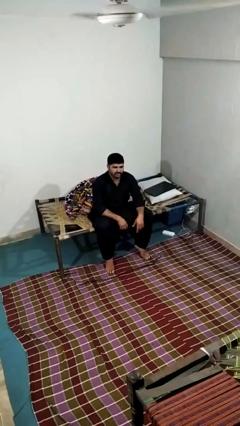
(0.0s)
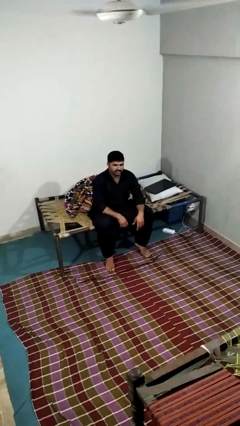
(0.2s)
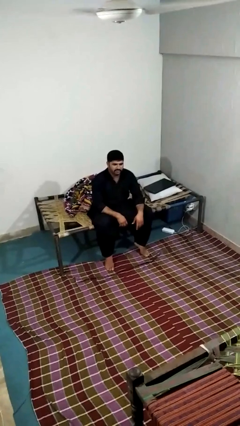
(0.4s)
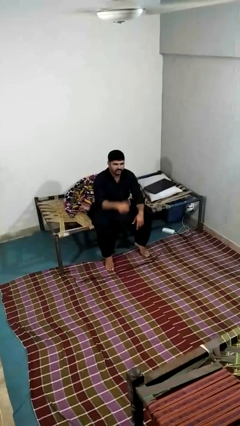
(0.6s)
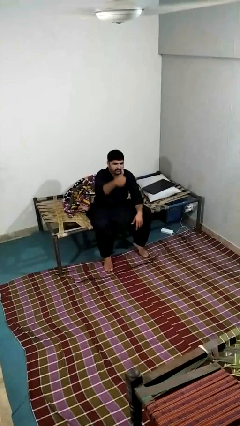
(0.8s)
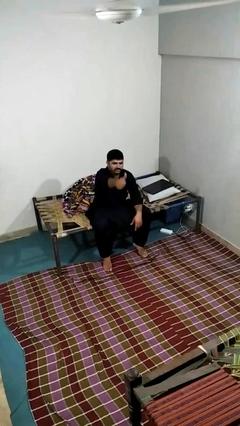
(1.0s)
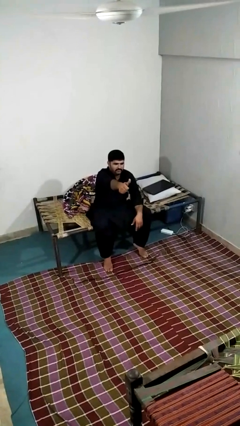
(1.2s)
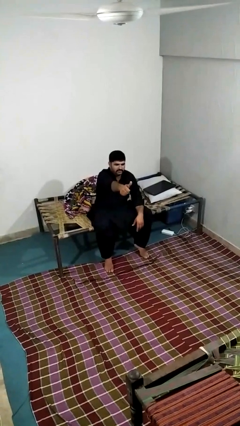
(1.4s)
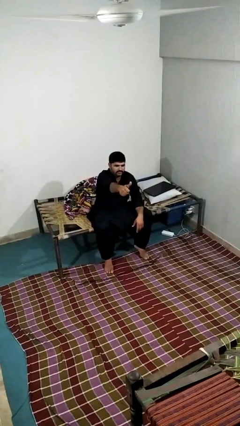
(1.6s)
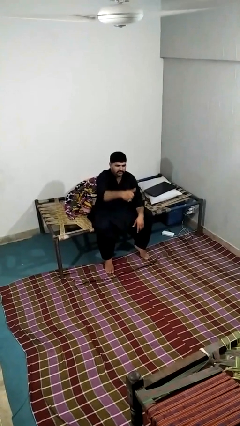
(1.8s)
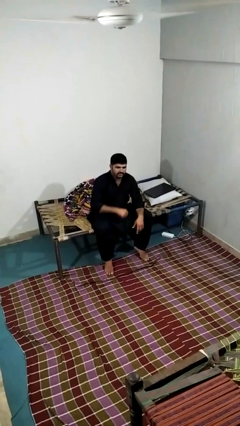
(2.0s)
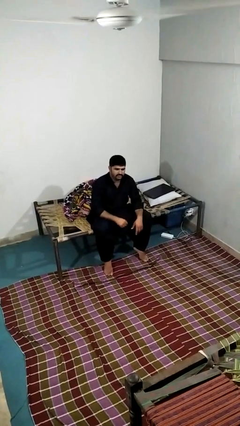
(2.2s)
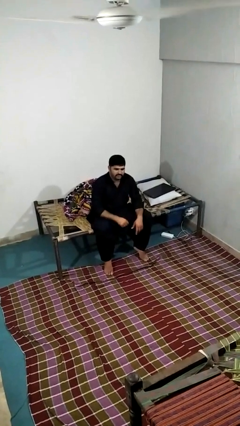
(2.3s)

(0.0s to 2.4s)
person gestures thumbs up

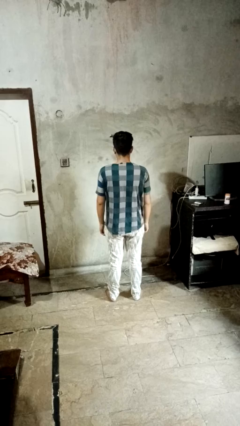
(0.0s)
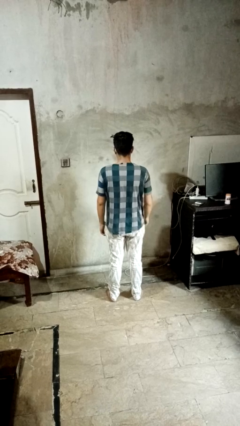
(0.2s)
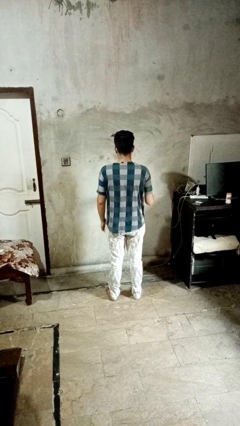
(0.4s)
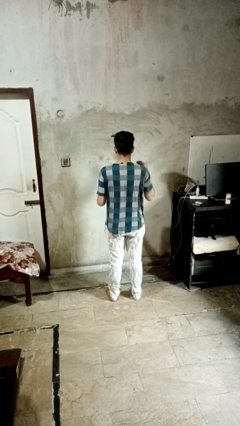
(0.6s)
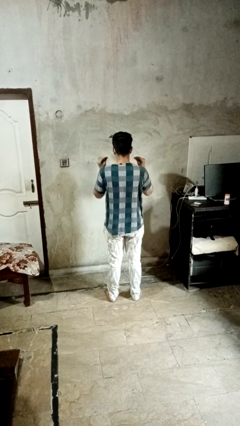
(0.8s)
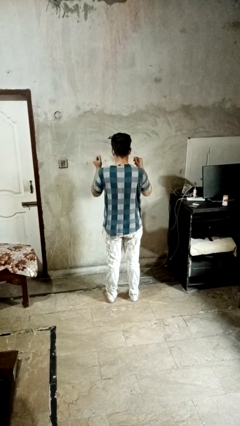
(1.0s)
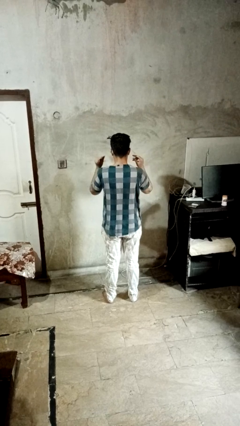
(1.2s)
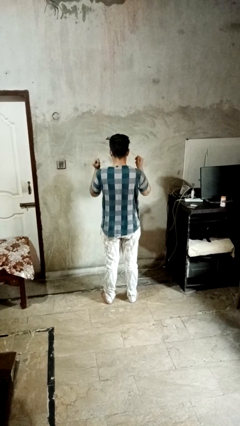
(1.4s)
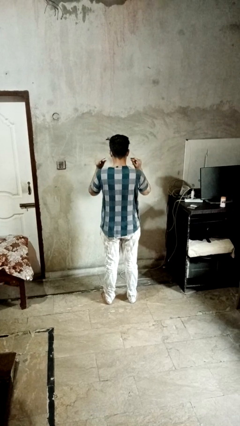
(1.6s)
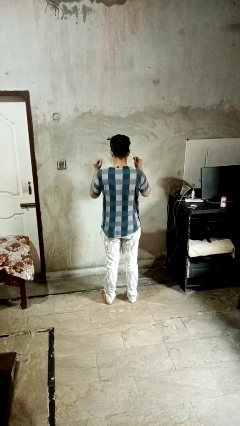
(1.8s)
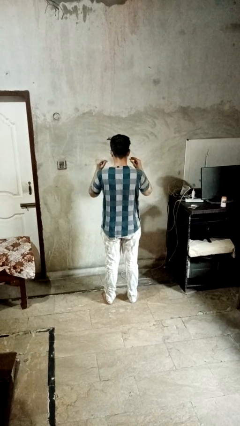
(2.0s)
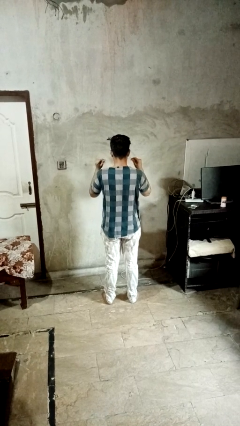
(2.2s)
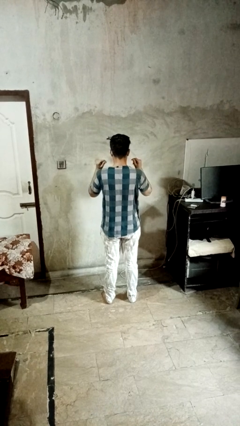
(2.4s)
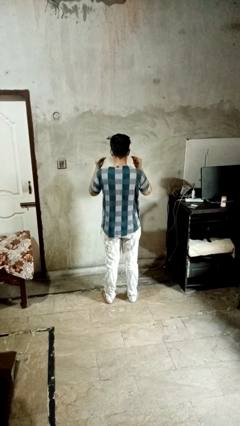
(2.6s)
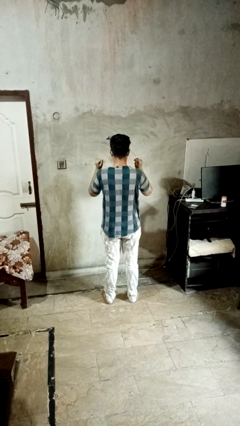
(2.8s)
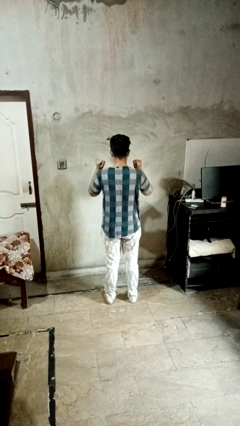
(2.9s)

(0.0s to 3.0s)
person snaps fingers

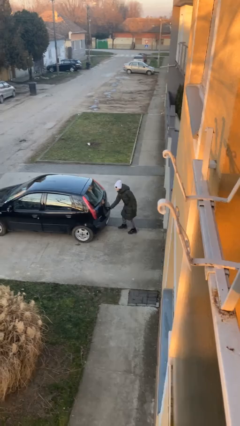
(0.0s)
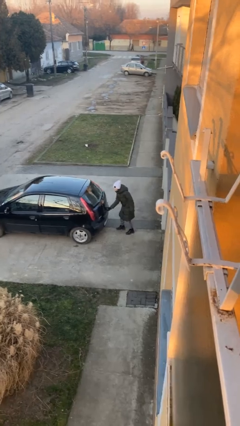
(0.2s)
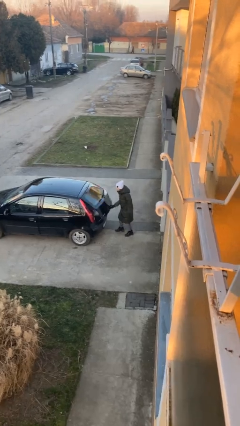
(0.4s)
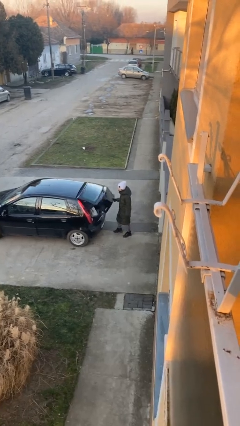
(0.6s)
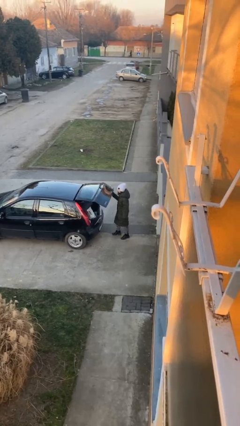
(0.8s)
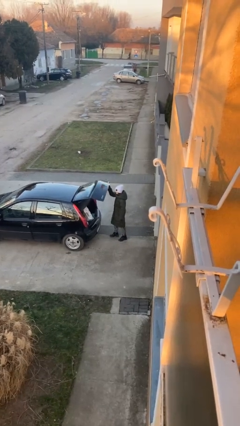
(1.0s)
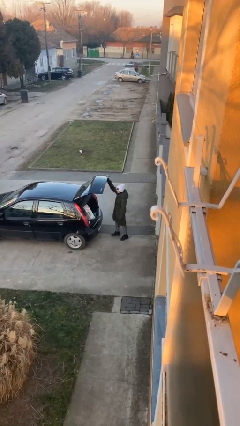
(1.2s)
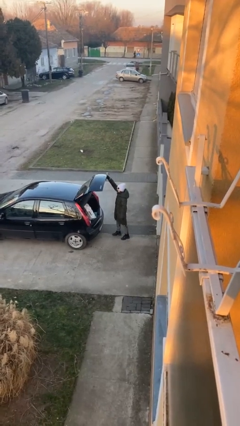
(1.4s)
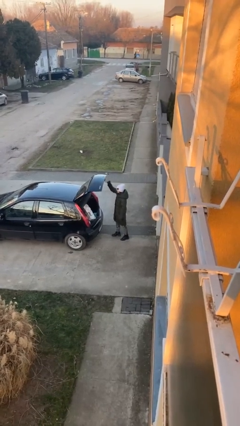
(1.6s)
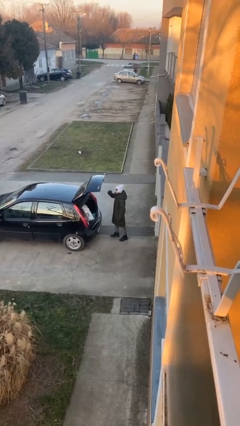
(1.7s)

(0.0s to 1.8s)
person opens car trunk

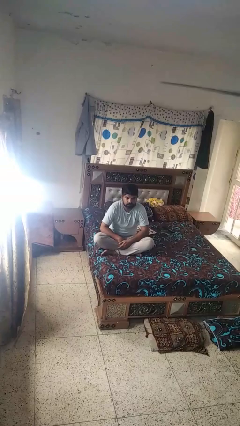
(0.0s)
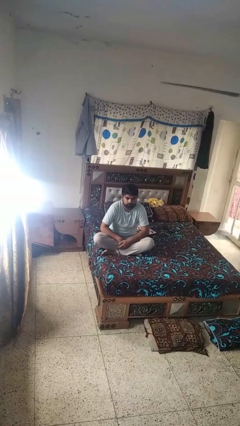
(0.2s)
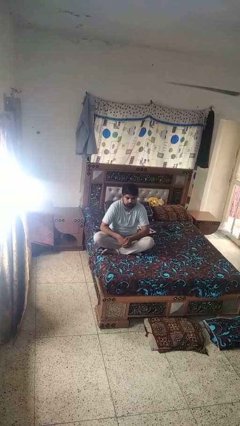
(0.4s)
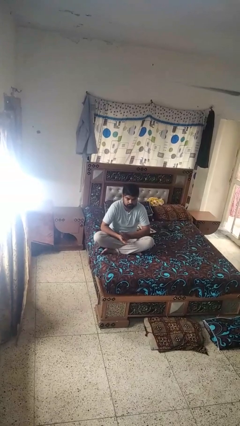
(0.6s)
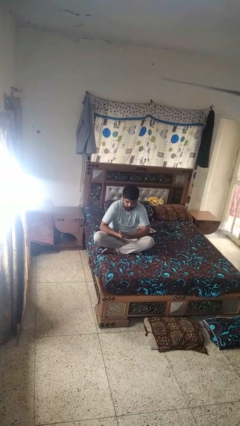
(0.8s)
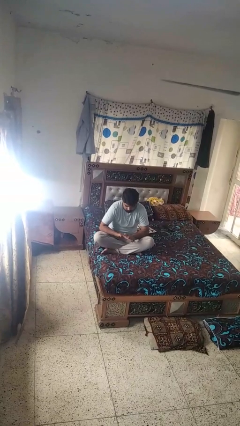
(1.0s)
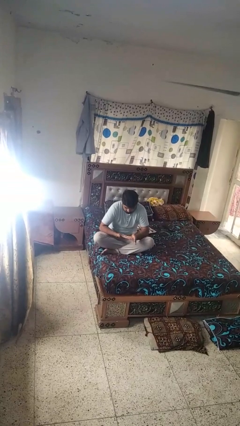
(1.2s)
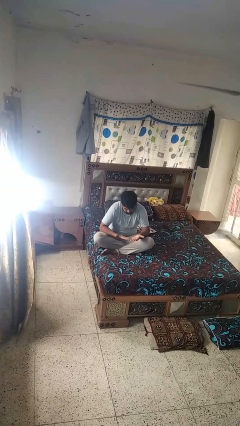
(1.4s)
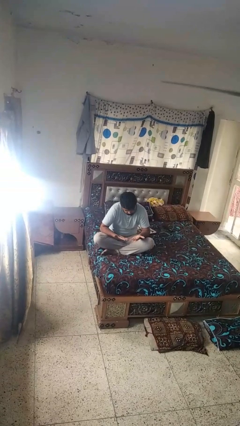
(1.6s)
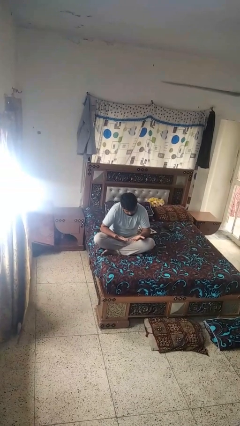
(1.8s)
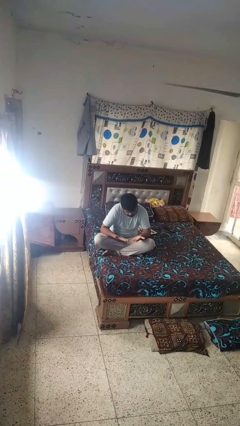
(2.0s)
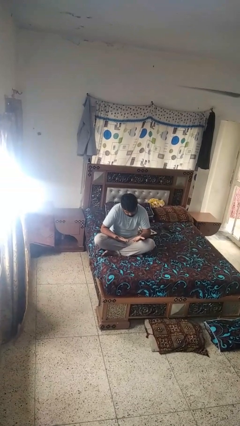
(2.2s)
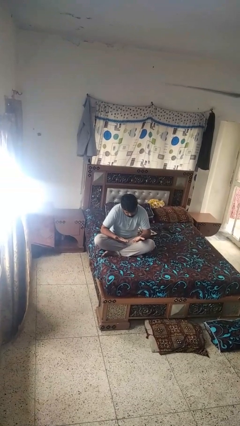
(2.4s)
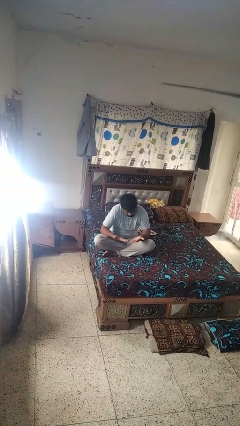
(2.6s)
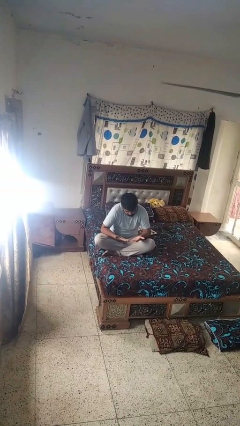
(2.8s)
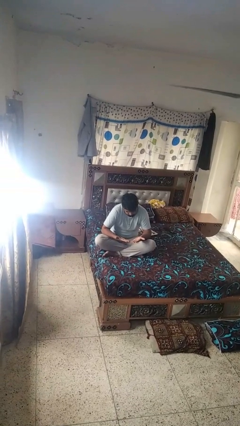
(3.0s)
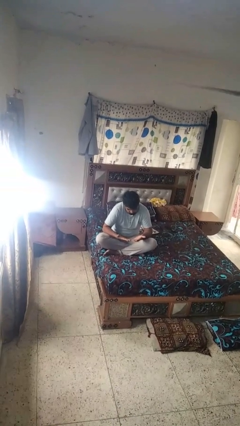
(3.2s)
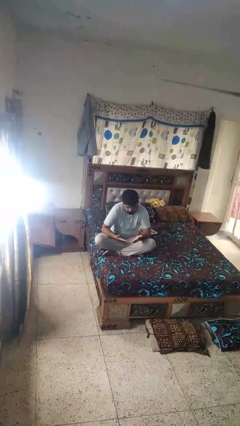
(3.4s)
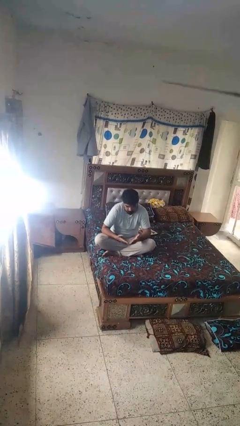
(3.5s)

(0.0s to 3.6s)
person looks at hands in lap

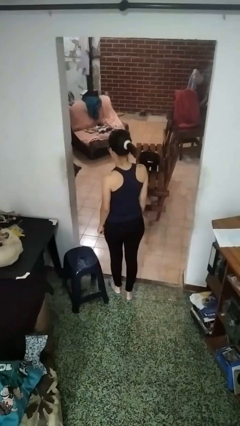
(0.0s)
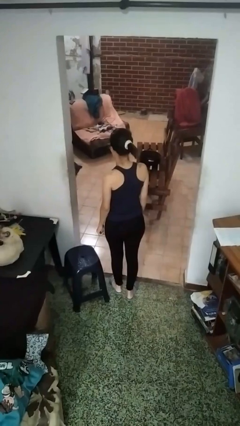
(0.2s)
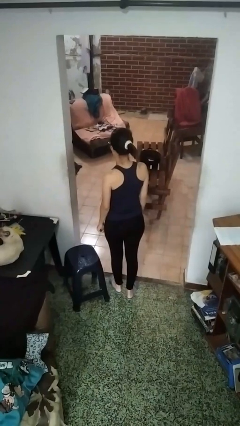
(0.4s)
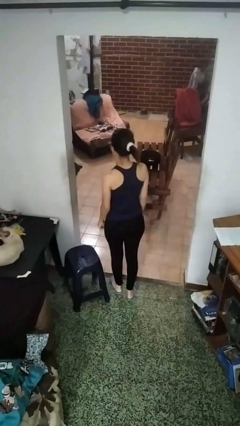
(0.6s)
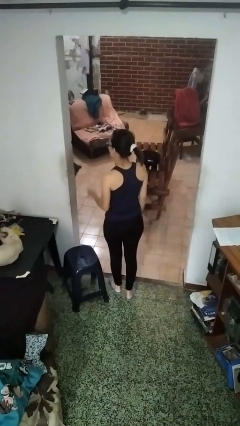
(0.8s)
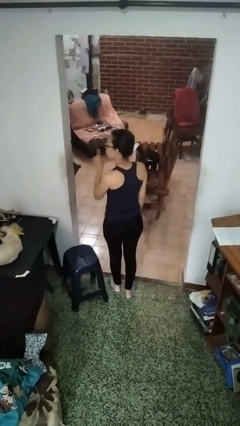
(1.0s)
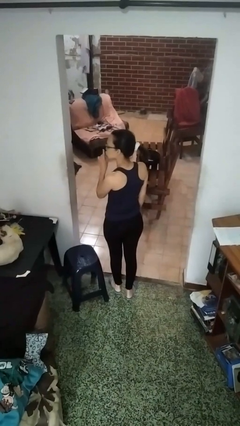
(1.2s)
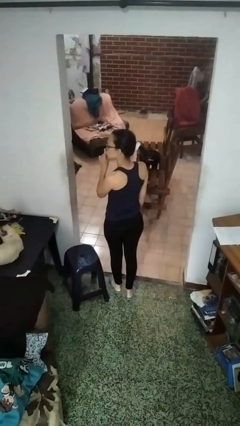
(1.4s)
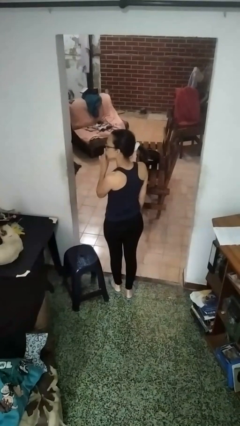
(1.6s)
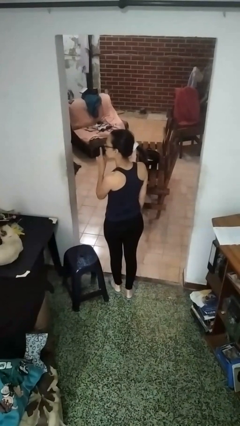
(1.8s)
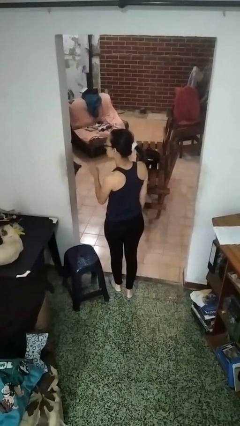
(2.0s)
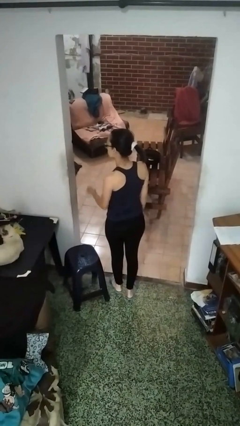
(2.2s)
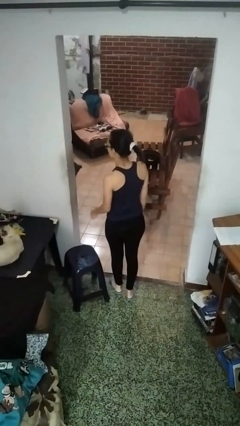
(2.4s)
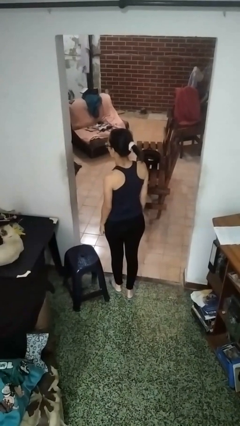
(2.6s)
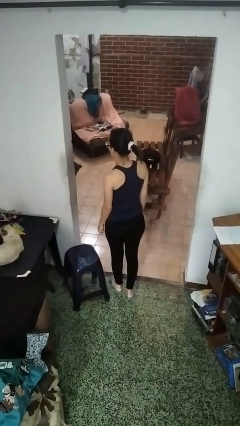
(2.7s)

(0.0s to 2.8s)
person gestures be quiet

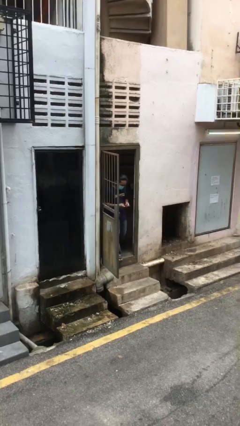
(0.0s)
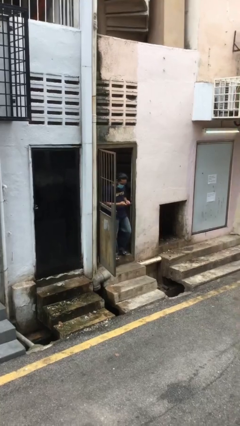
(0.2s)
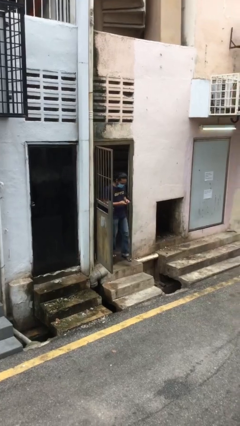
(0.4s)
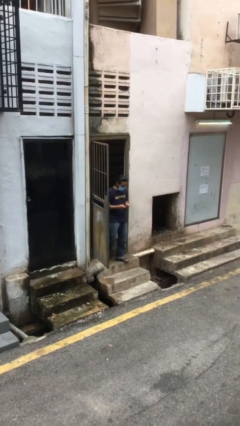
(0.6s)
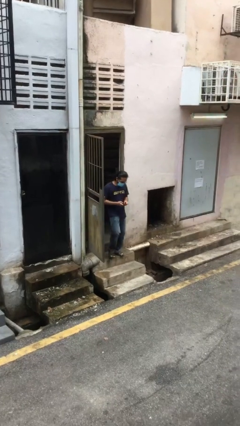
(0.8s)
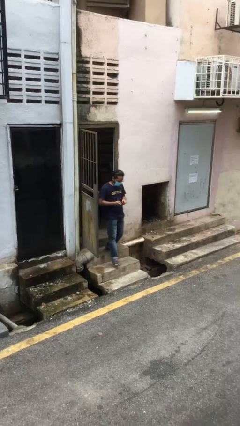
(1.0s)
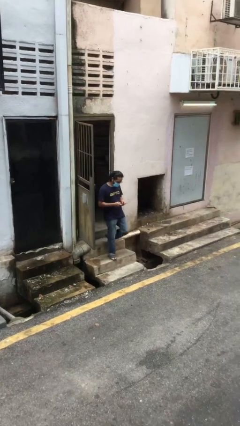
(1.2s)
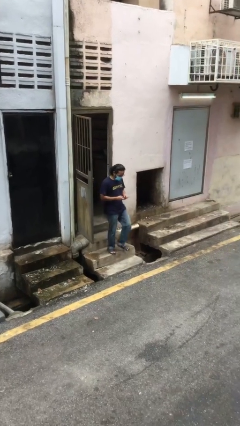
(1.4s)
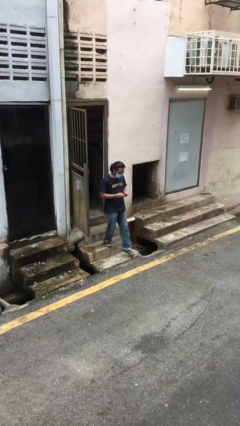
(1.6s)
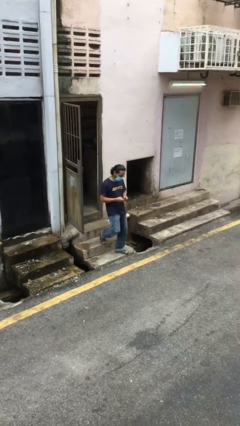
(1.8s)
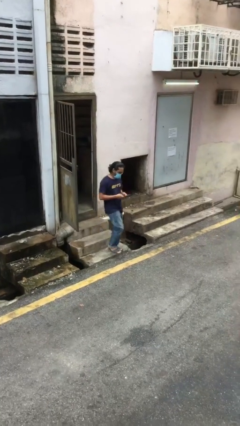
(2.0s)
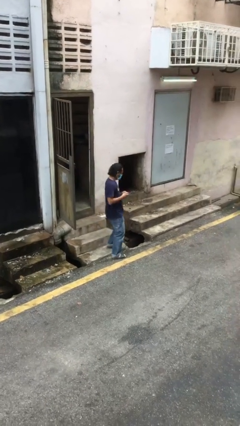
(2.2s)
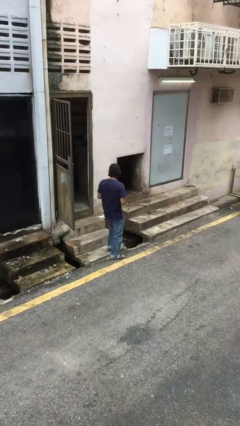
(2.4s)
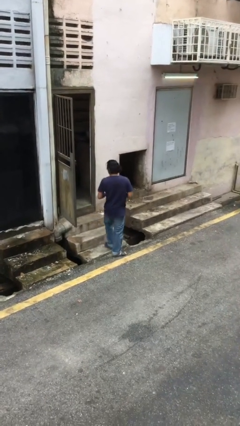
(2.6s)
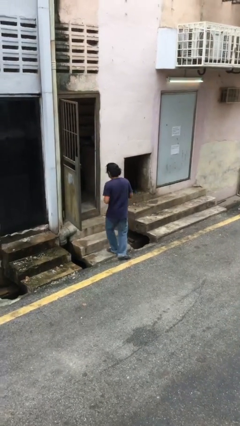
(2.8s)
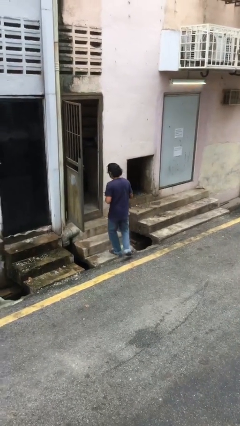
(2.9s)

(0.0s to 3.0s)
person enters scene through structure

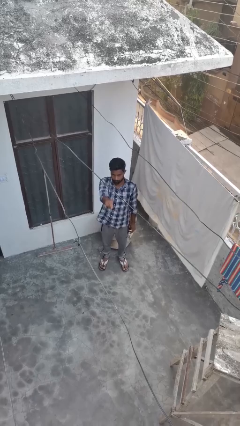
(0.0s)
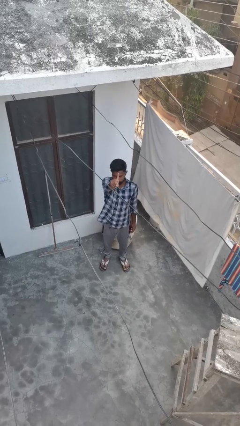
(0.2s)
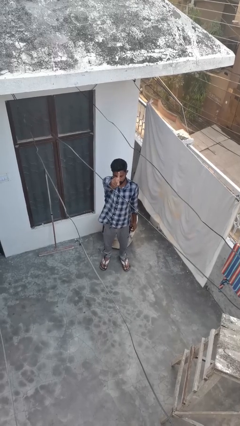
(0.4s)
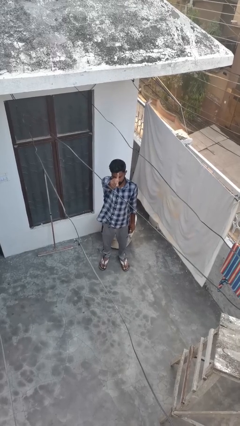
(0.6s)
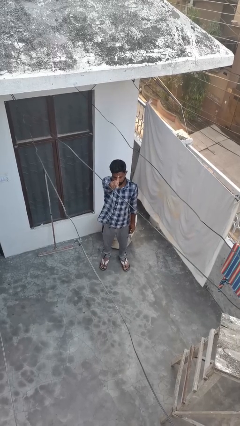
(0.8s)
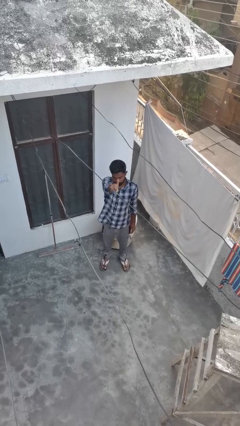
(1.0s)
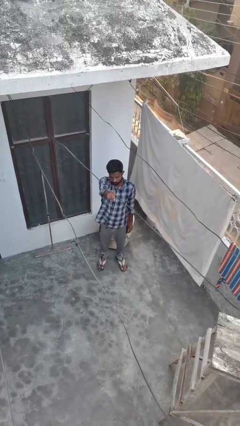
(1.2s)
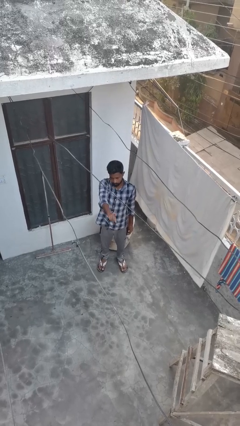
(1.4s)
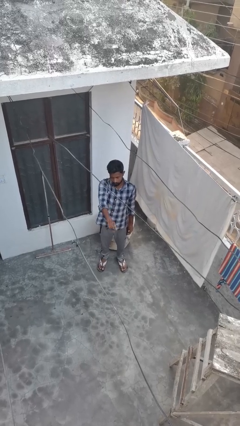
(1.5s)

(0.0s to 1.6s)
person gestures number one
